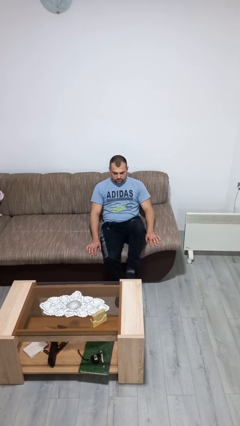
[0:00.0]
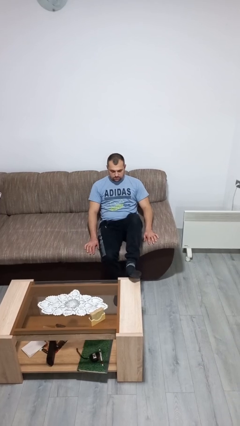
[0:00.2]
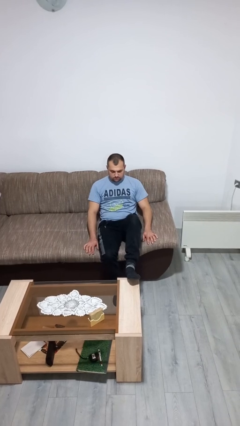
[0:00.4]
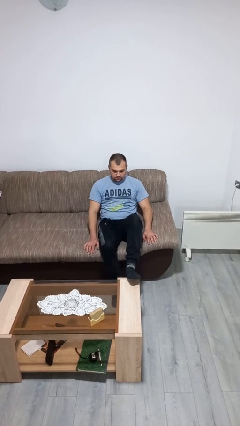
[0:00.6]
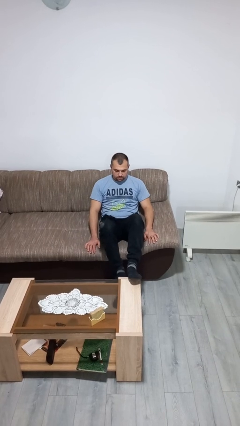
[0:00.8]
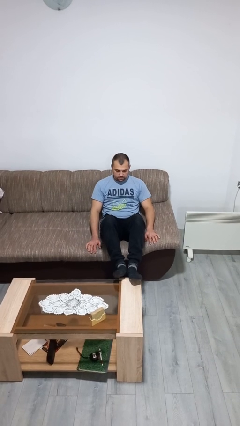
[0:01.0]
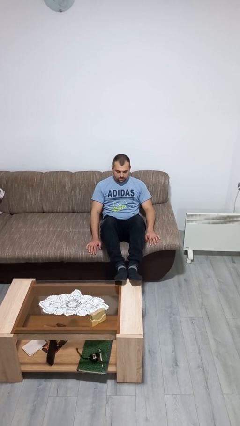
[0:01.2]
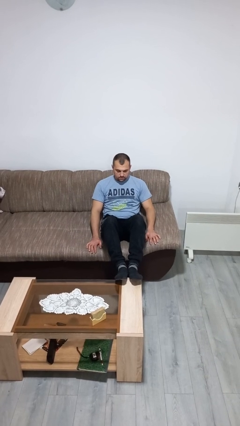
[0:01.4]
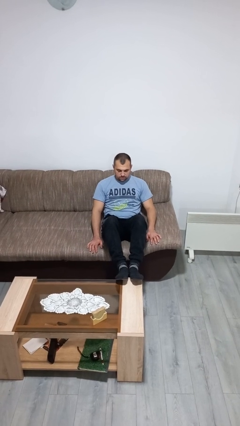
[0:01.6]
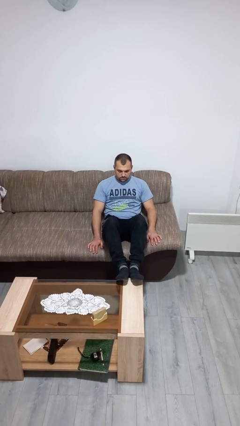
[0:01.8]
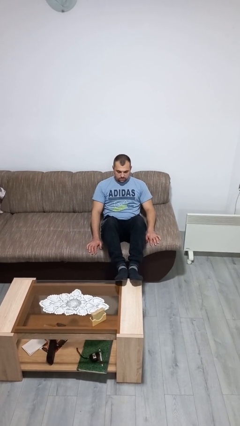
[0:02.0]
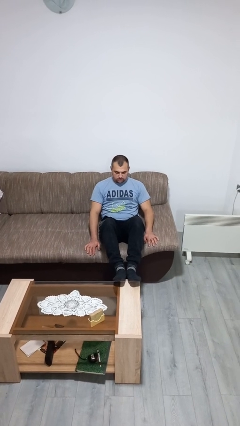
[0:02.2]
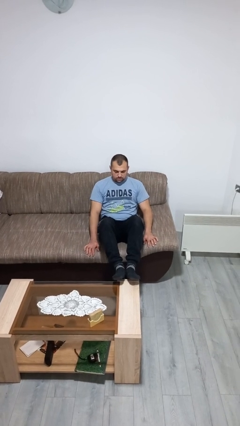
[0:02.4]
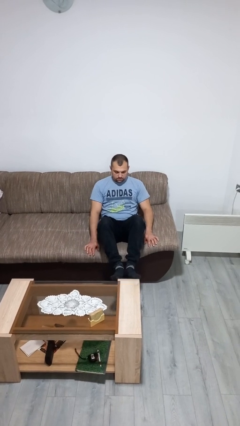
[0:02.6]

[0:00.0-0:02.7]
person puts feet up

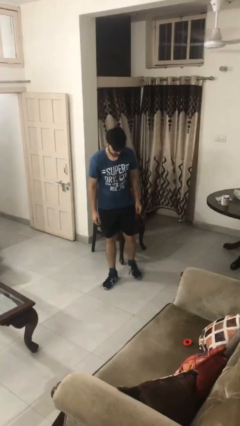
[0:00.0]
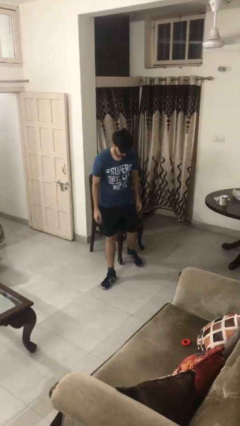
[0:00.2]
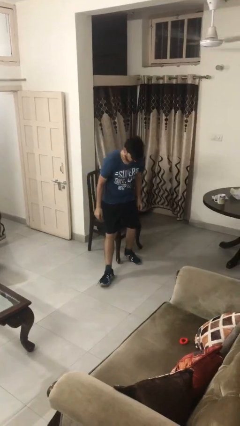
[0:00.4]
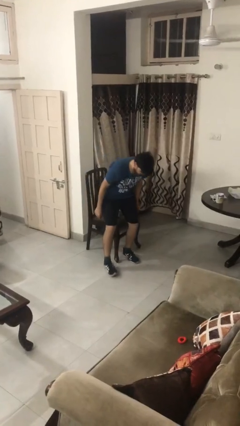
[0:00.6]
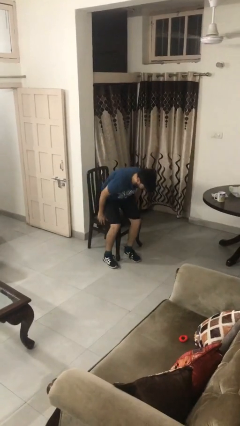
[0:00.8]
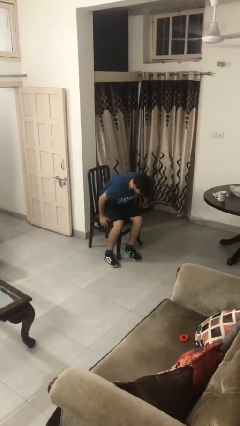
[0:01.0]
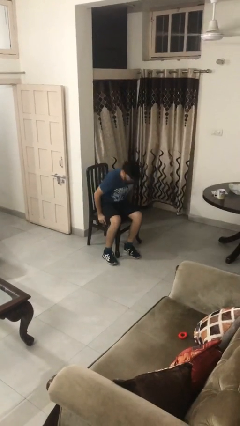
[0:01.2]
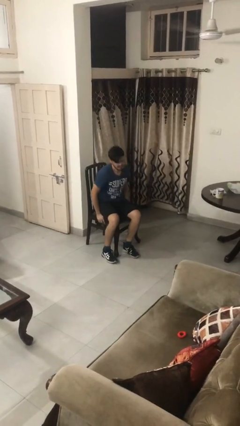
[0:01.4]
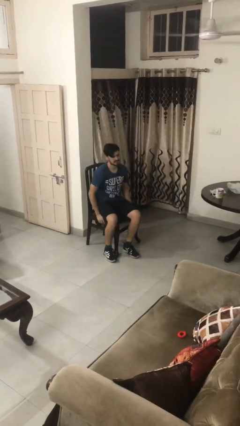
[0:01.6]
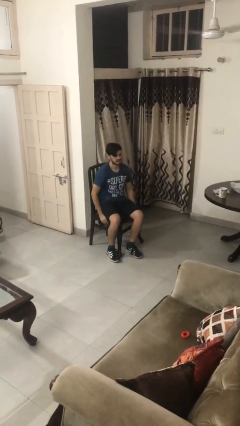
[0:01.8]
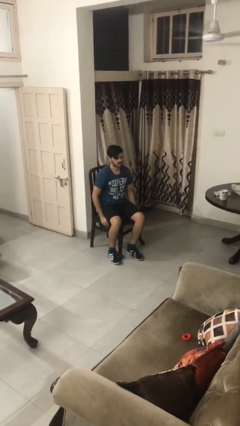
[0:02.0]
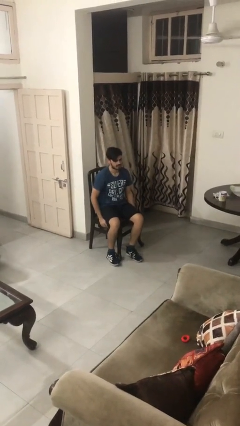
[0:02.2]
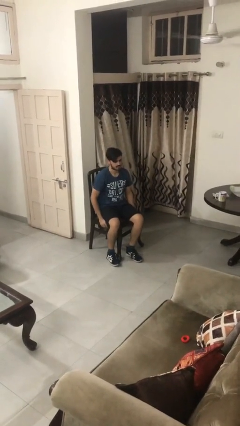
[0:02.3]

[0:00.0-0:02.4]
person sits down

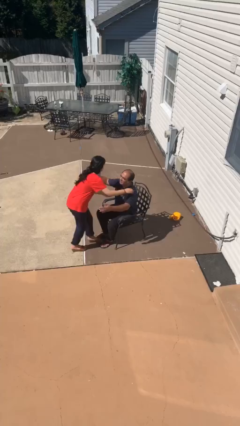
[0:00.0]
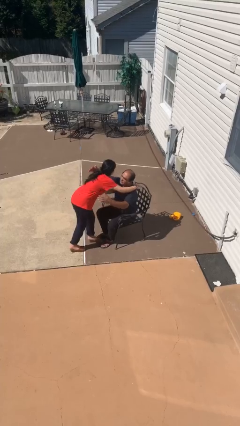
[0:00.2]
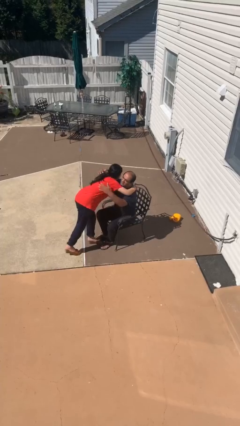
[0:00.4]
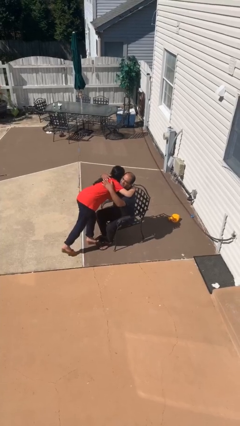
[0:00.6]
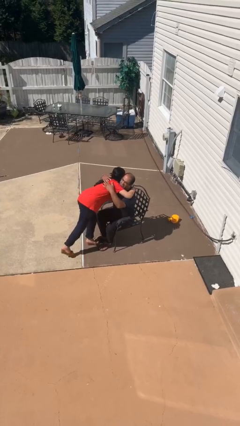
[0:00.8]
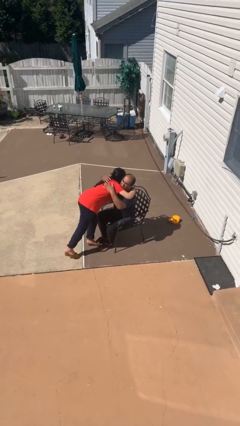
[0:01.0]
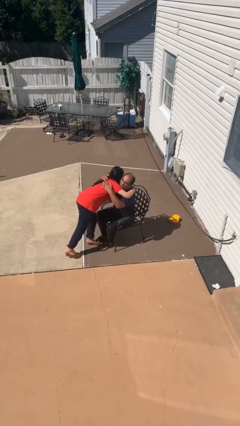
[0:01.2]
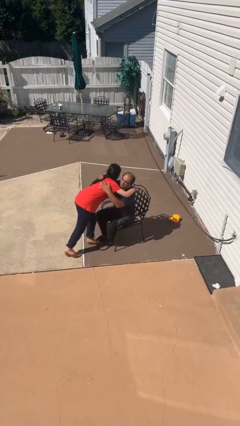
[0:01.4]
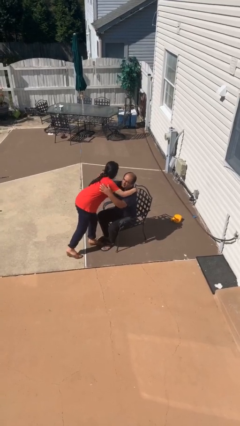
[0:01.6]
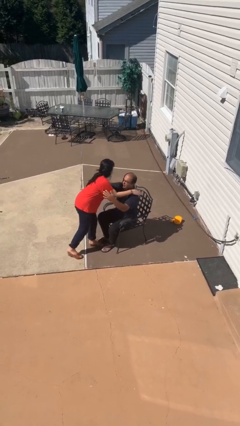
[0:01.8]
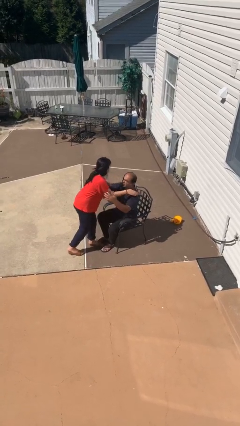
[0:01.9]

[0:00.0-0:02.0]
person embraces person

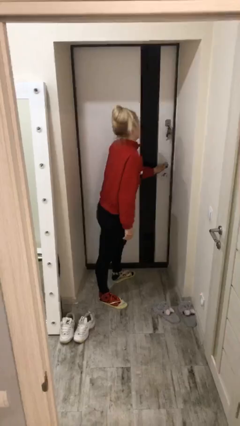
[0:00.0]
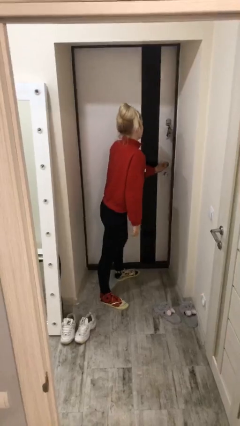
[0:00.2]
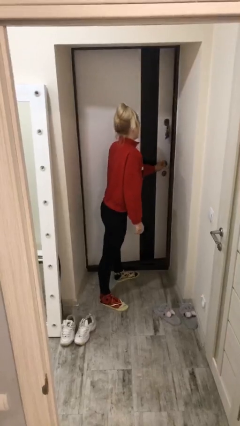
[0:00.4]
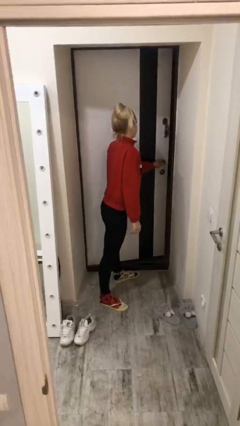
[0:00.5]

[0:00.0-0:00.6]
person opens facility door

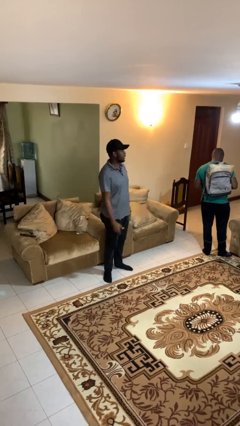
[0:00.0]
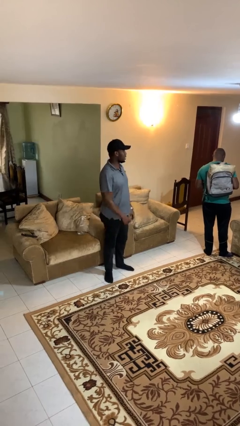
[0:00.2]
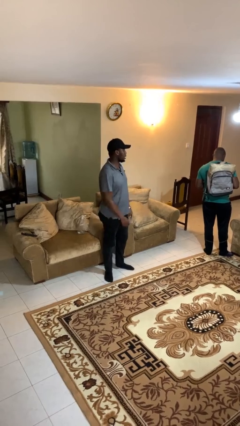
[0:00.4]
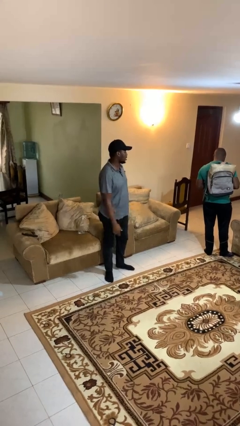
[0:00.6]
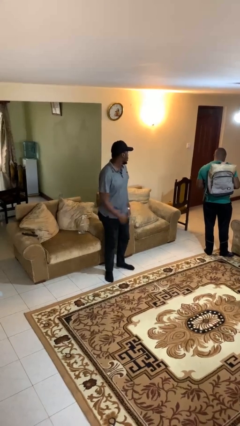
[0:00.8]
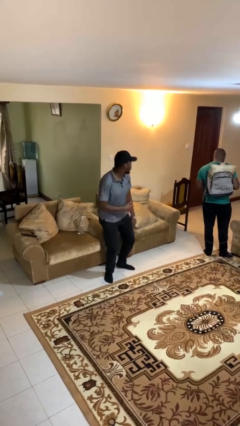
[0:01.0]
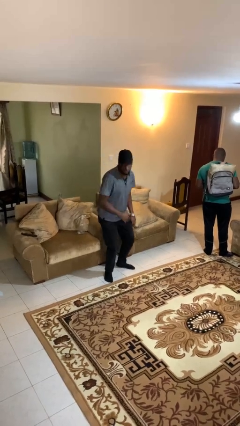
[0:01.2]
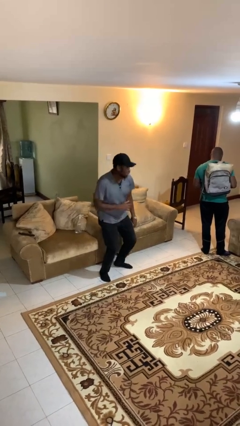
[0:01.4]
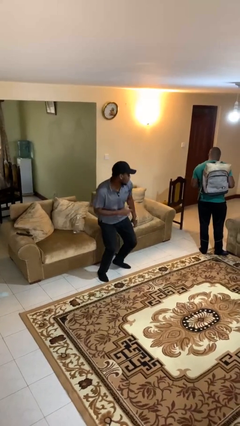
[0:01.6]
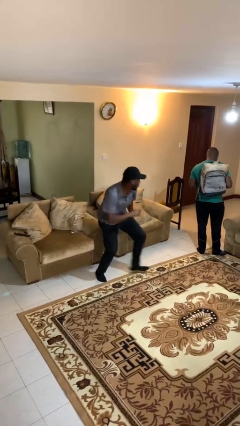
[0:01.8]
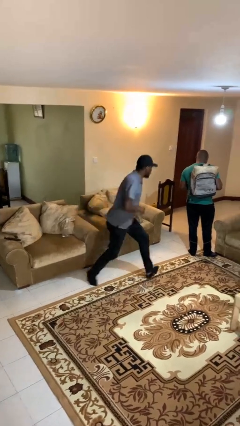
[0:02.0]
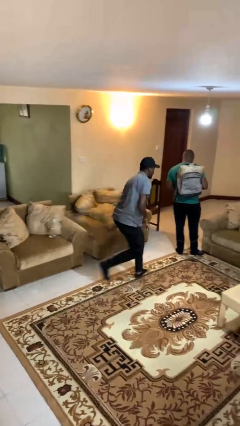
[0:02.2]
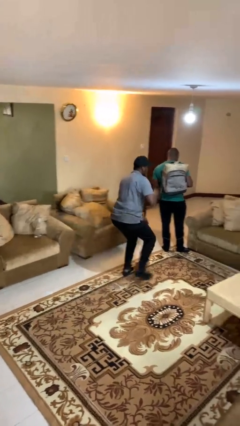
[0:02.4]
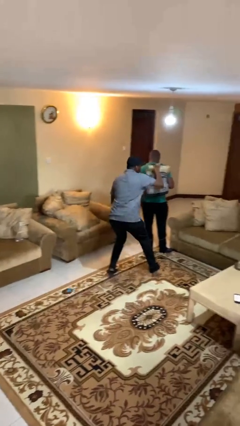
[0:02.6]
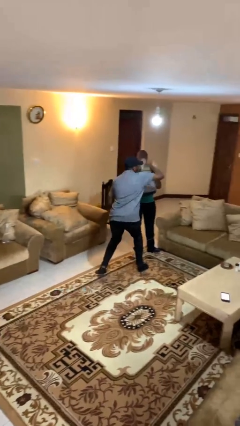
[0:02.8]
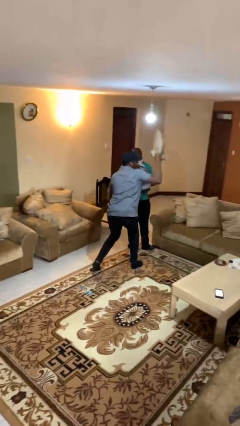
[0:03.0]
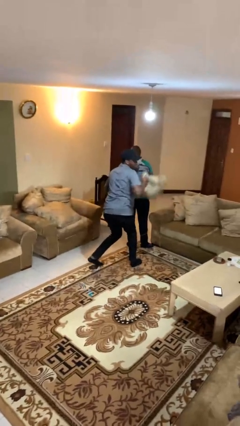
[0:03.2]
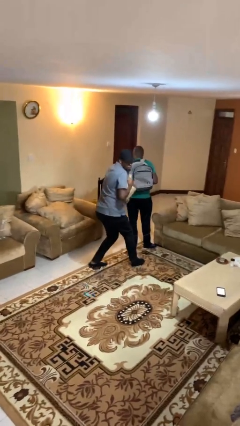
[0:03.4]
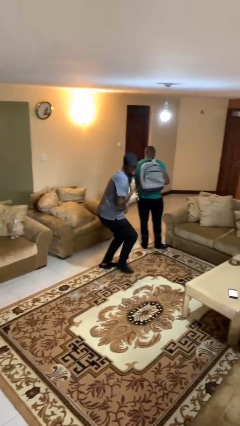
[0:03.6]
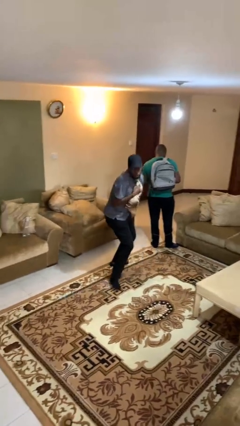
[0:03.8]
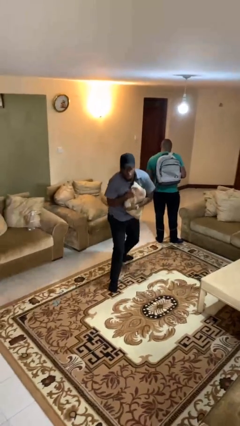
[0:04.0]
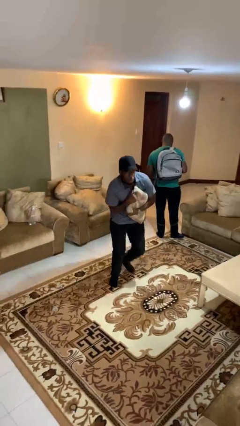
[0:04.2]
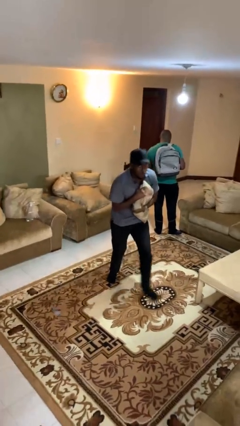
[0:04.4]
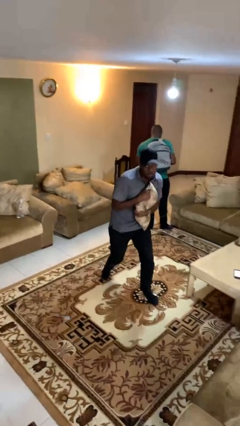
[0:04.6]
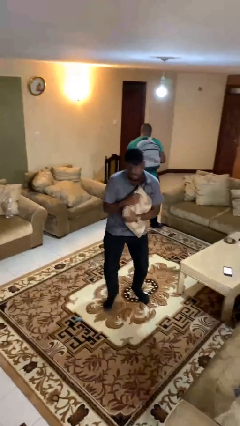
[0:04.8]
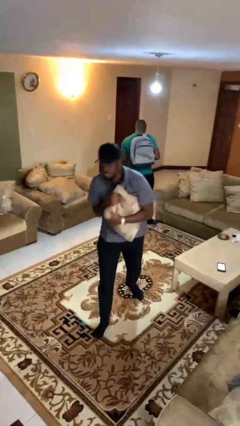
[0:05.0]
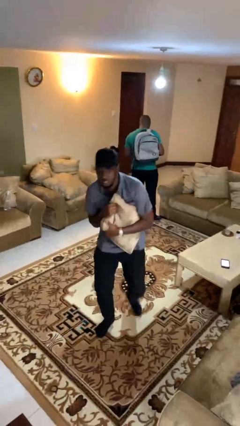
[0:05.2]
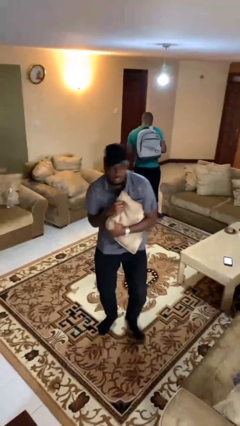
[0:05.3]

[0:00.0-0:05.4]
person steals object from person

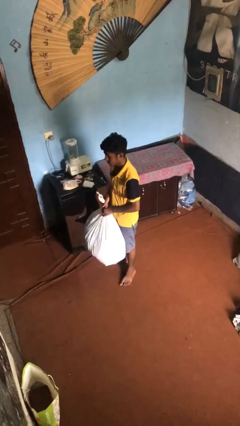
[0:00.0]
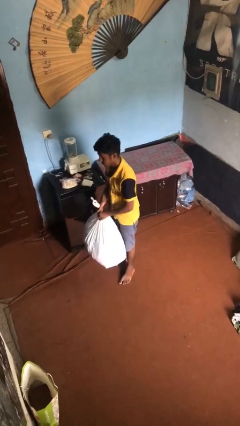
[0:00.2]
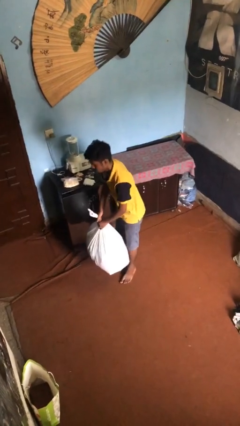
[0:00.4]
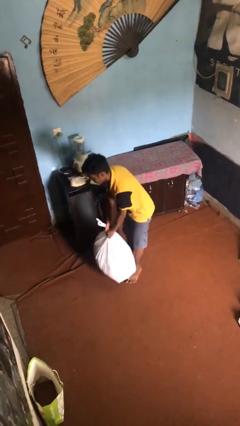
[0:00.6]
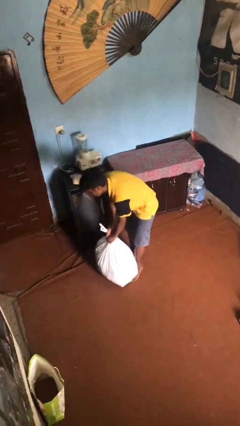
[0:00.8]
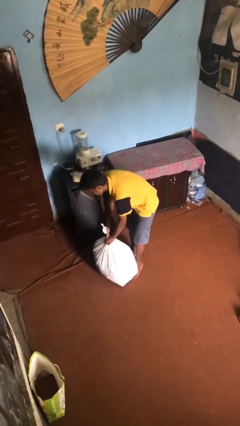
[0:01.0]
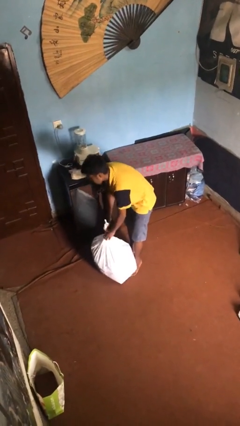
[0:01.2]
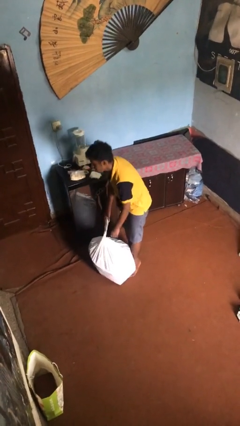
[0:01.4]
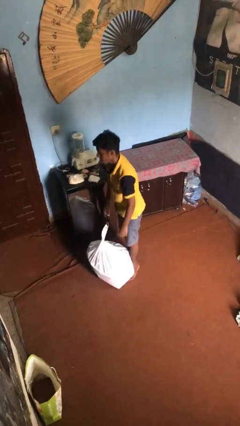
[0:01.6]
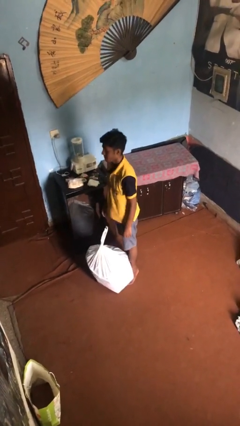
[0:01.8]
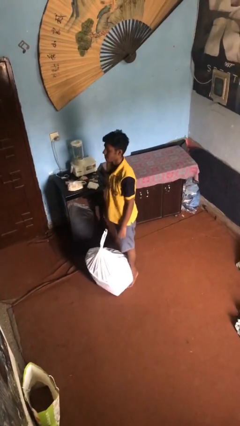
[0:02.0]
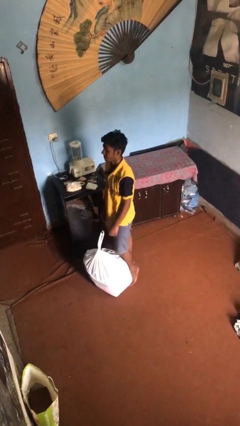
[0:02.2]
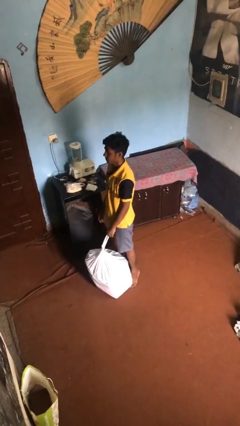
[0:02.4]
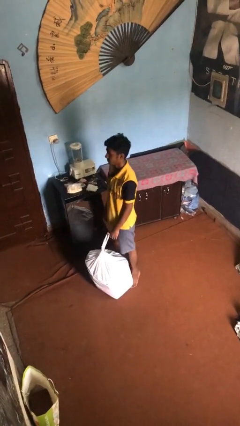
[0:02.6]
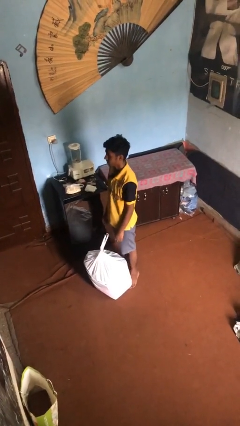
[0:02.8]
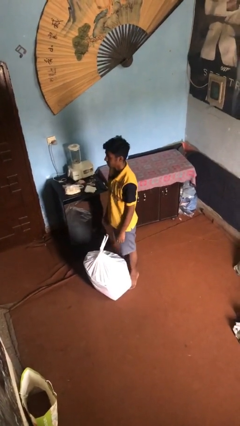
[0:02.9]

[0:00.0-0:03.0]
person puts down object on floor

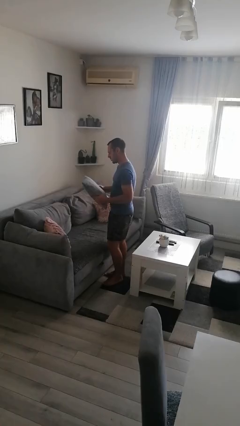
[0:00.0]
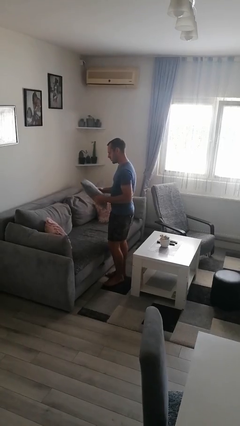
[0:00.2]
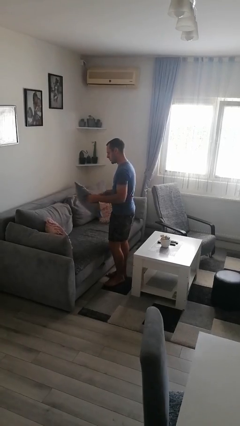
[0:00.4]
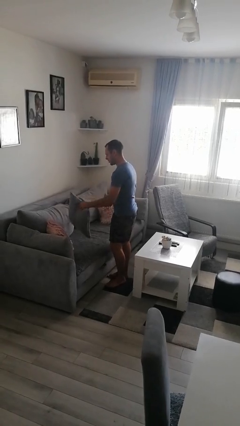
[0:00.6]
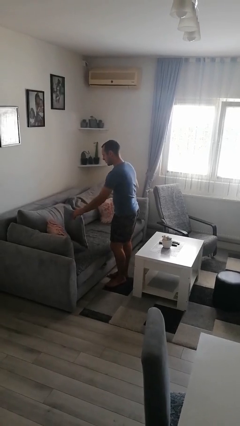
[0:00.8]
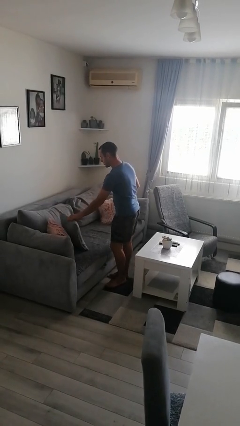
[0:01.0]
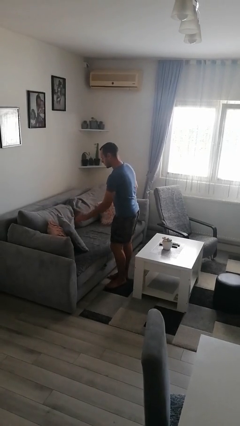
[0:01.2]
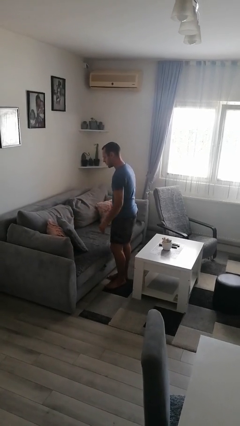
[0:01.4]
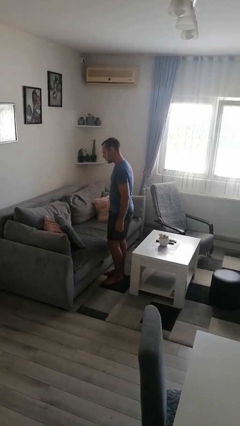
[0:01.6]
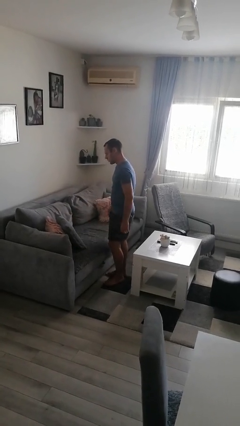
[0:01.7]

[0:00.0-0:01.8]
person puts down object on couch
